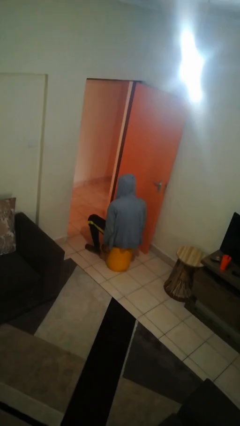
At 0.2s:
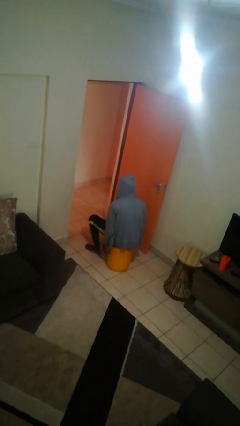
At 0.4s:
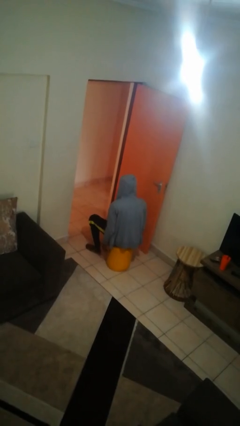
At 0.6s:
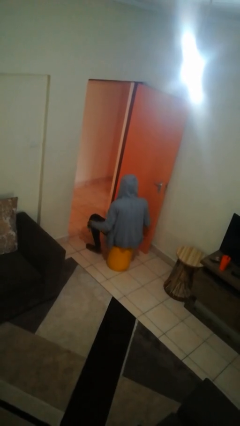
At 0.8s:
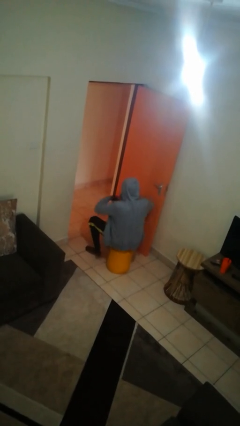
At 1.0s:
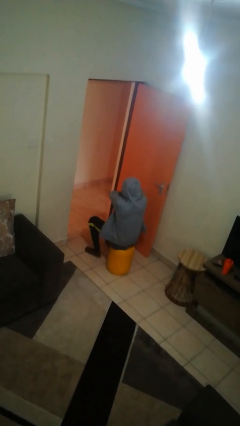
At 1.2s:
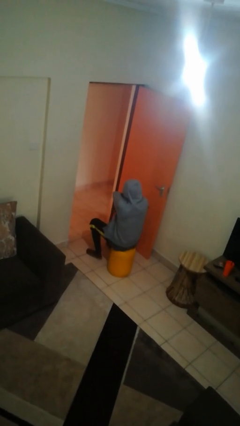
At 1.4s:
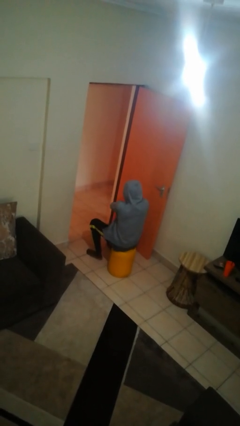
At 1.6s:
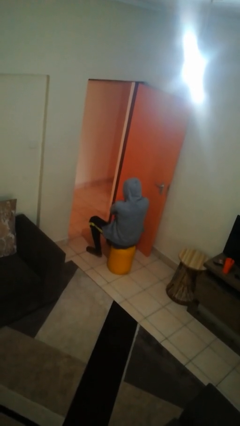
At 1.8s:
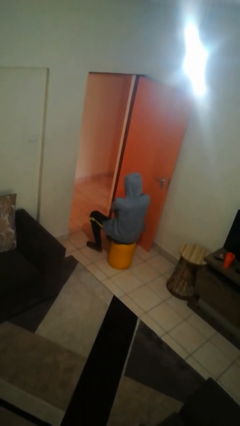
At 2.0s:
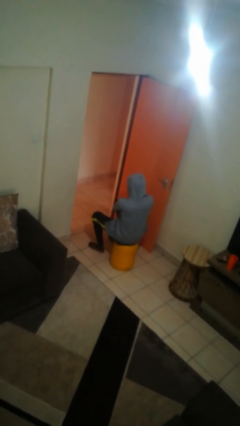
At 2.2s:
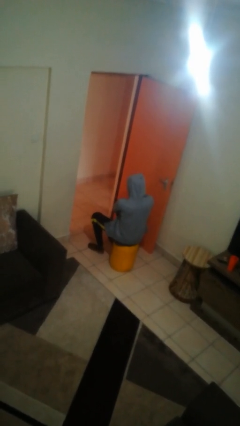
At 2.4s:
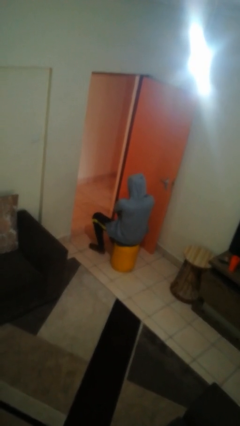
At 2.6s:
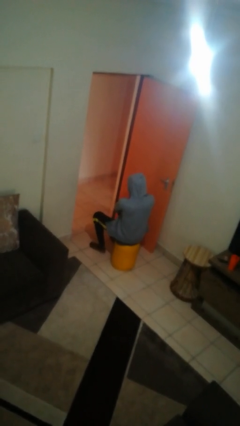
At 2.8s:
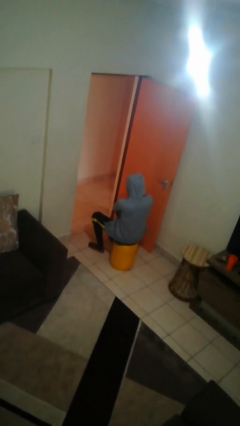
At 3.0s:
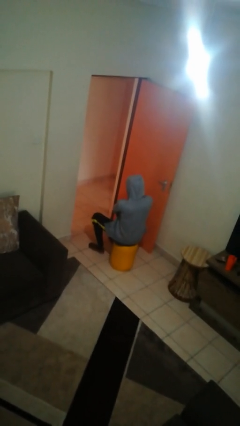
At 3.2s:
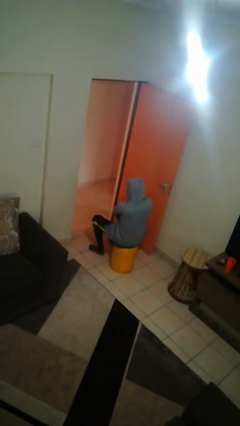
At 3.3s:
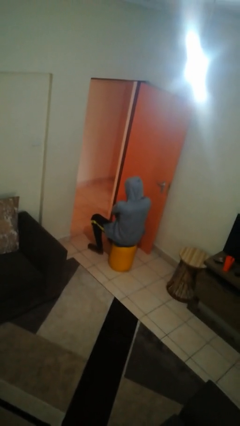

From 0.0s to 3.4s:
person crosses arms

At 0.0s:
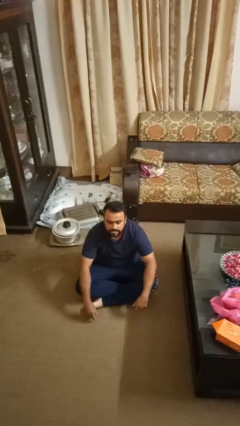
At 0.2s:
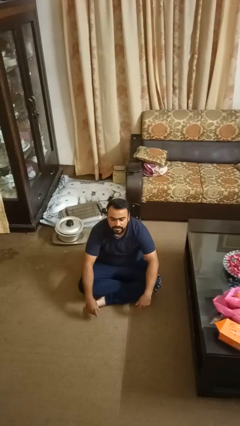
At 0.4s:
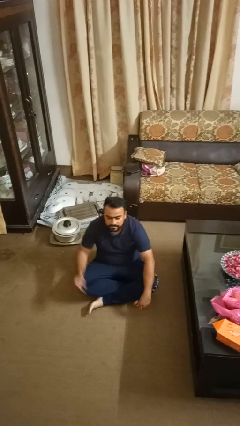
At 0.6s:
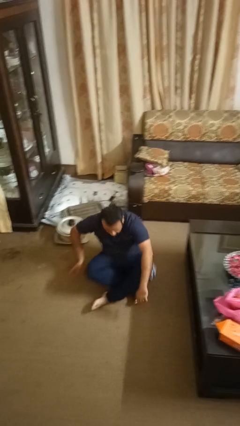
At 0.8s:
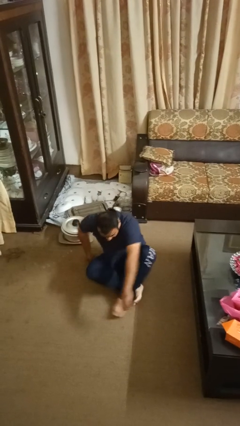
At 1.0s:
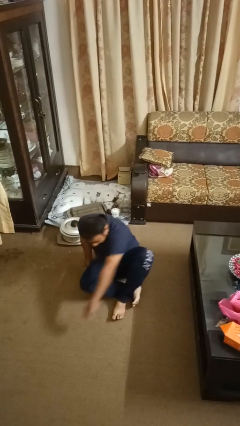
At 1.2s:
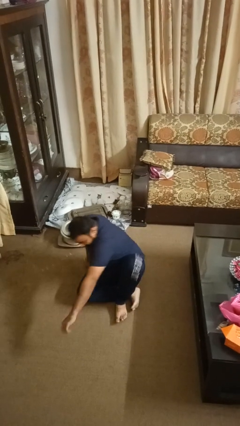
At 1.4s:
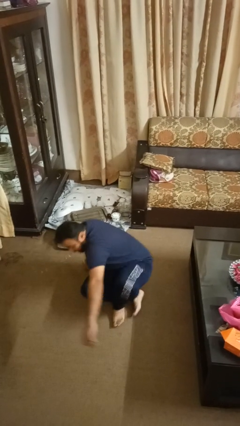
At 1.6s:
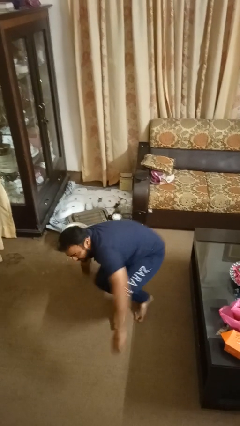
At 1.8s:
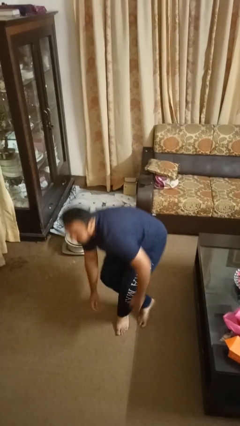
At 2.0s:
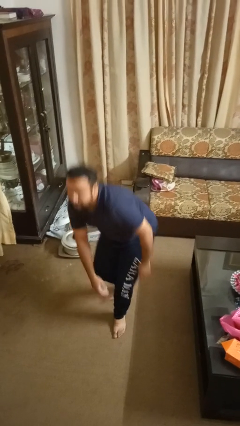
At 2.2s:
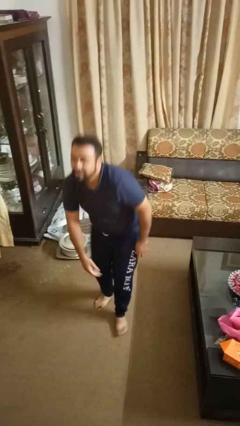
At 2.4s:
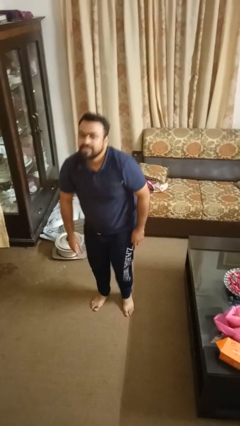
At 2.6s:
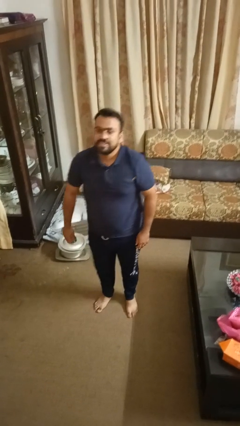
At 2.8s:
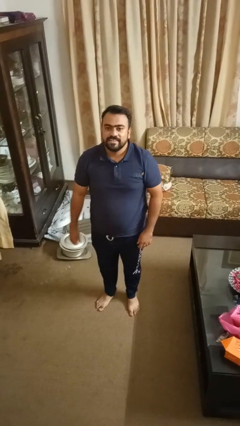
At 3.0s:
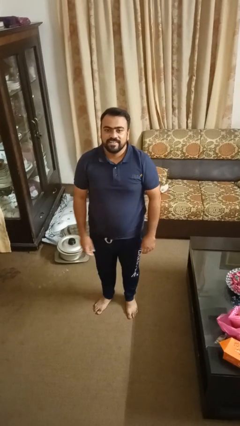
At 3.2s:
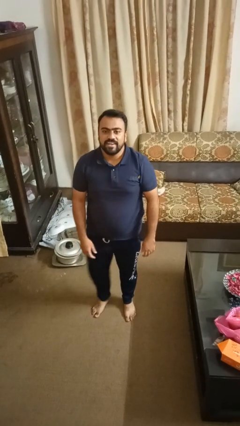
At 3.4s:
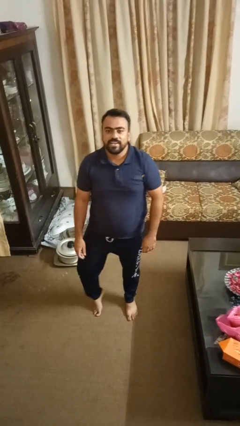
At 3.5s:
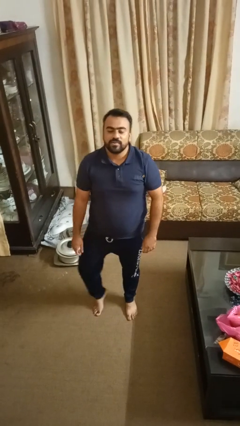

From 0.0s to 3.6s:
person stands up from floor

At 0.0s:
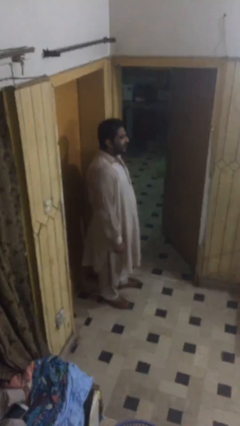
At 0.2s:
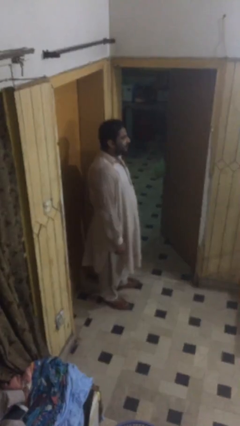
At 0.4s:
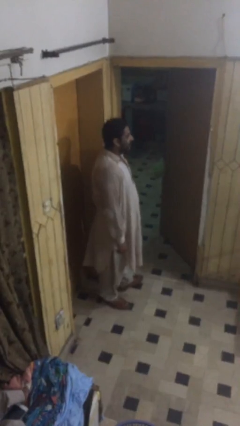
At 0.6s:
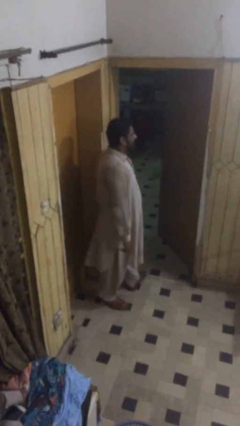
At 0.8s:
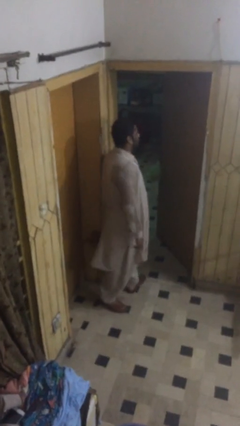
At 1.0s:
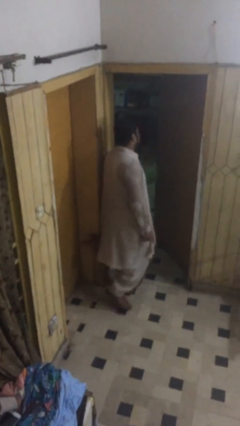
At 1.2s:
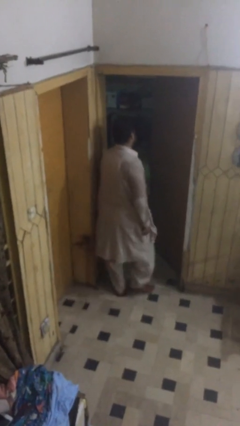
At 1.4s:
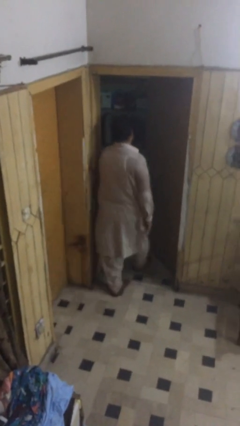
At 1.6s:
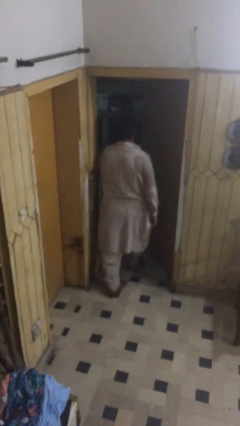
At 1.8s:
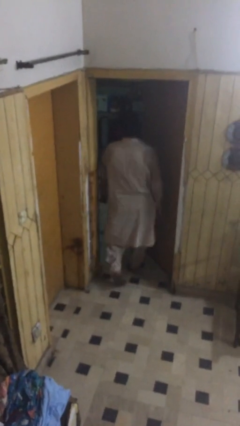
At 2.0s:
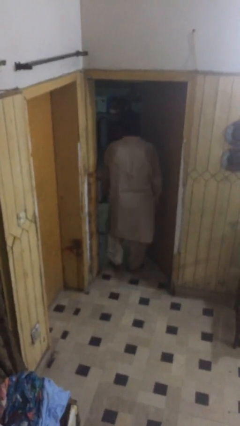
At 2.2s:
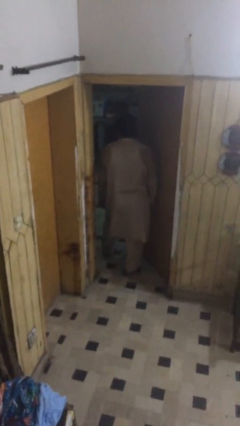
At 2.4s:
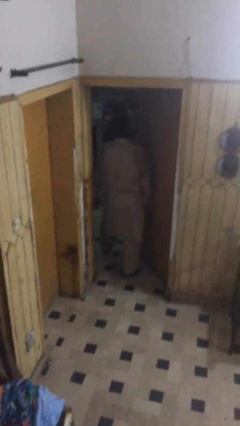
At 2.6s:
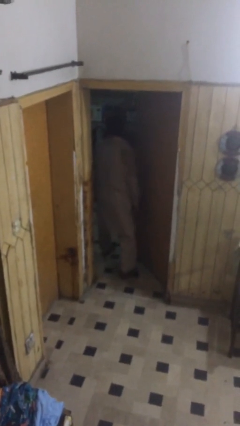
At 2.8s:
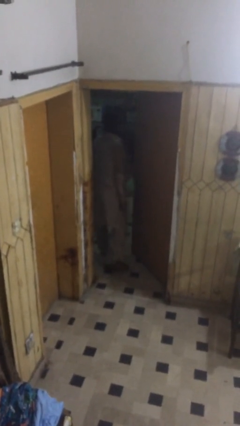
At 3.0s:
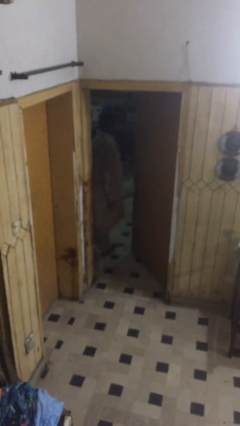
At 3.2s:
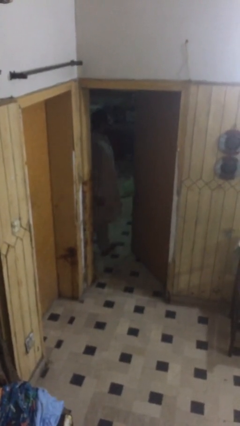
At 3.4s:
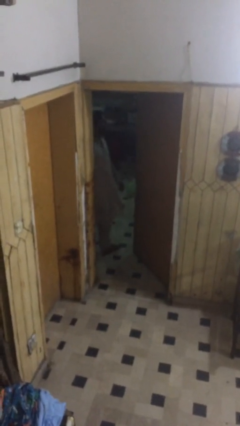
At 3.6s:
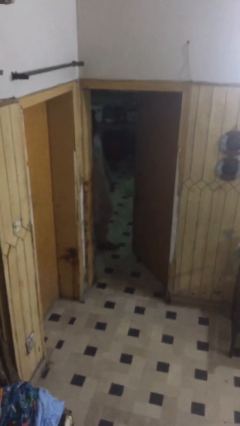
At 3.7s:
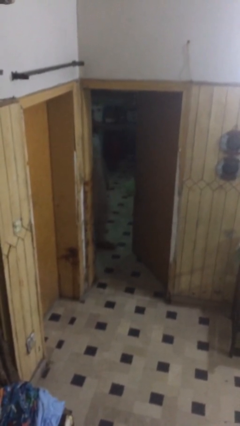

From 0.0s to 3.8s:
person exits scene through structure

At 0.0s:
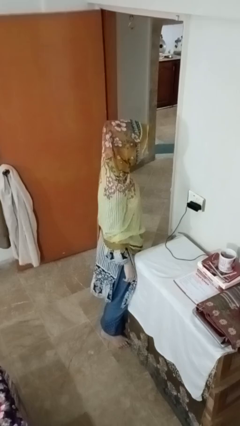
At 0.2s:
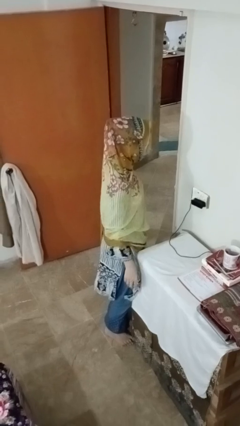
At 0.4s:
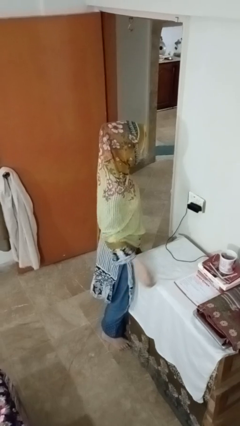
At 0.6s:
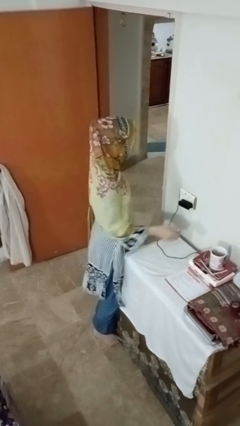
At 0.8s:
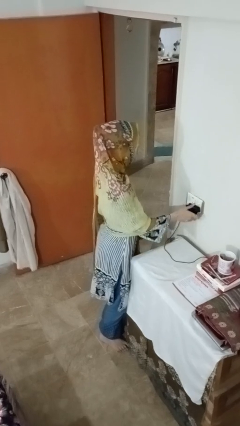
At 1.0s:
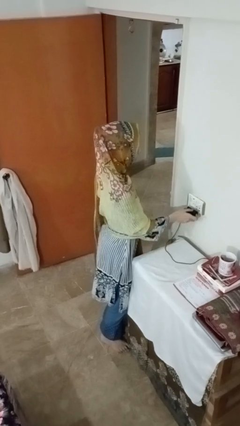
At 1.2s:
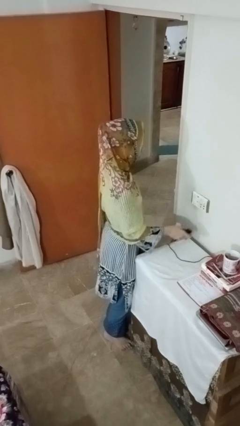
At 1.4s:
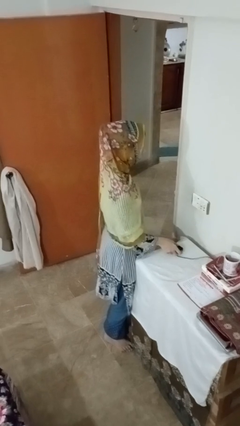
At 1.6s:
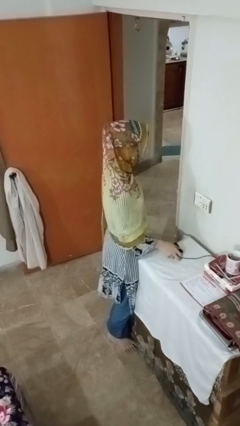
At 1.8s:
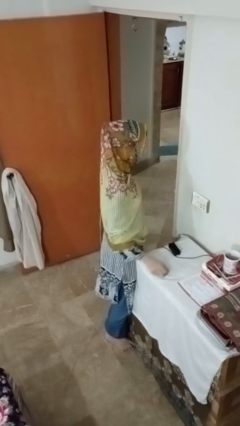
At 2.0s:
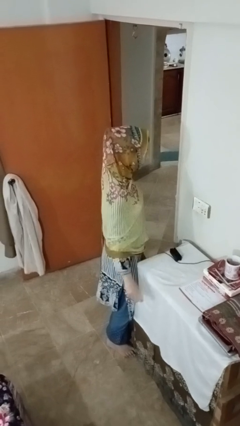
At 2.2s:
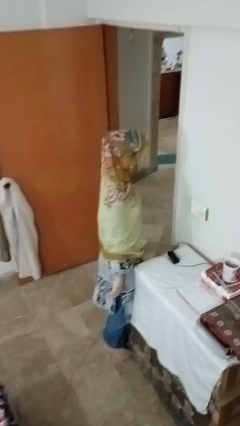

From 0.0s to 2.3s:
person unplugs from electrical socket

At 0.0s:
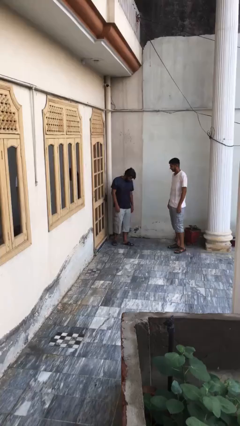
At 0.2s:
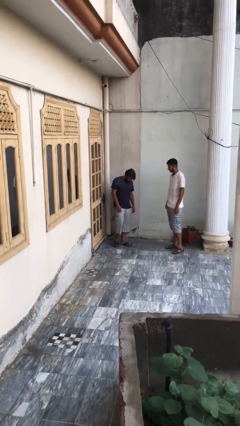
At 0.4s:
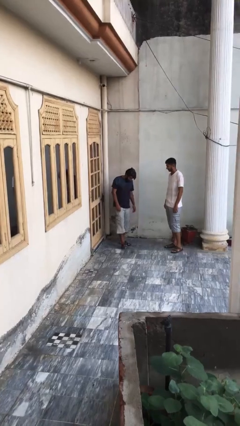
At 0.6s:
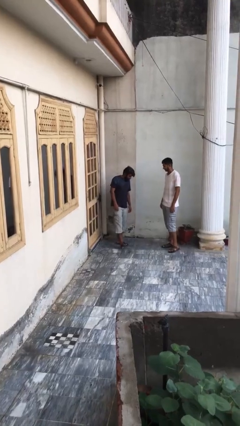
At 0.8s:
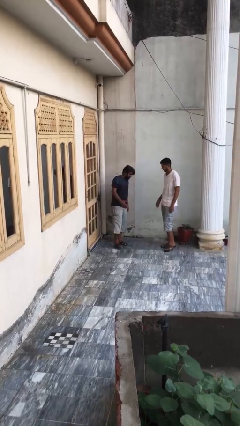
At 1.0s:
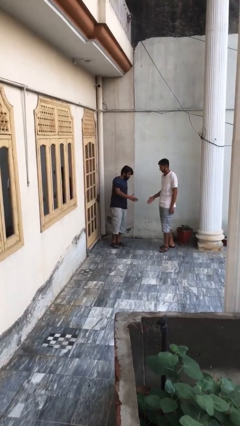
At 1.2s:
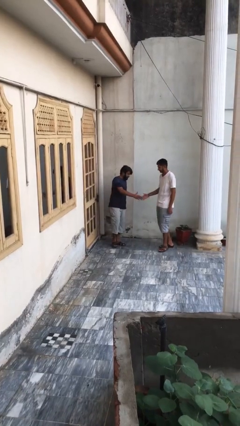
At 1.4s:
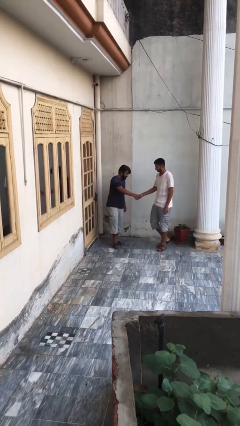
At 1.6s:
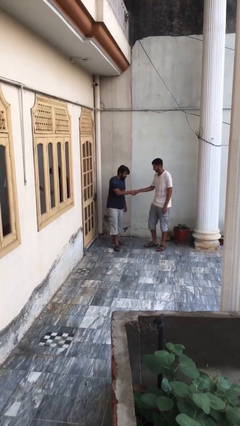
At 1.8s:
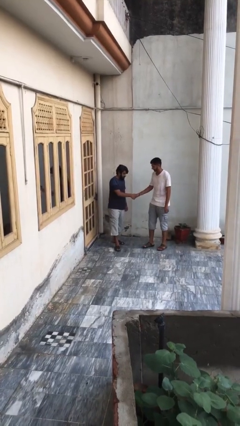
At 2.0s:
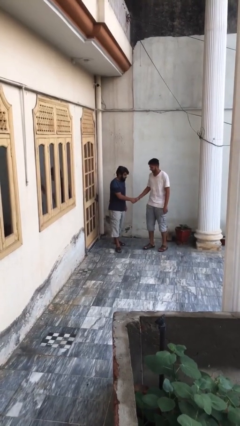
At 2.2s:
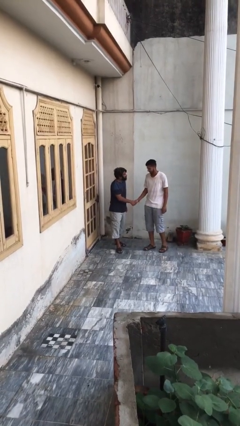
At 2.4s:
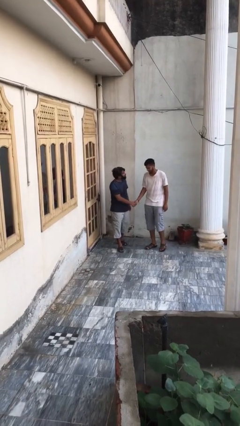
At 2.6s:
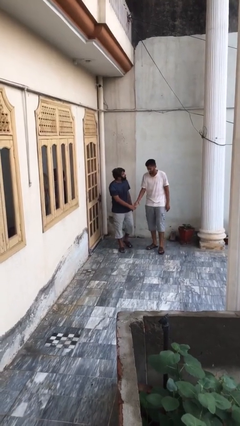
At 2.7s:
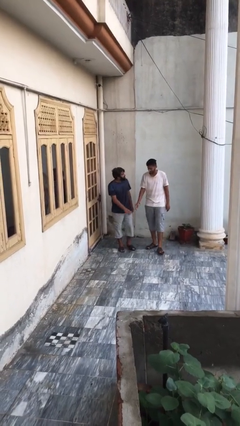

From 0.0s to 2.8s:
person shakes hand

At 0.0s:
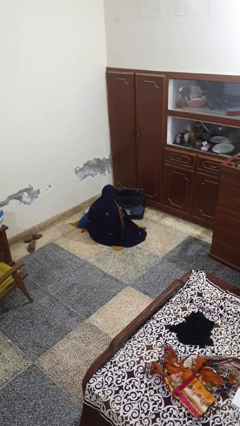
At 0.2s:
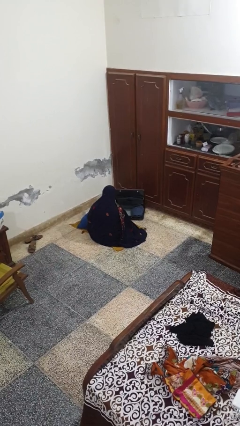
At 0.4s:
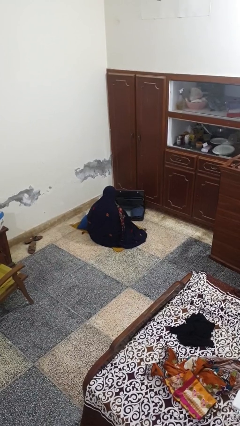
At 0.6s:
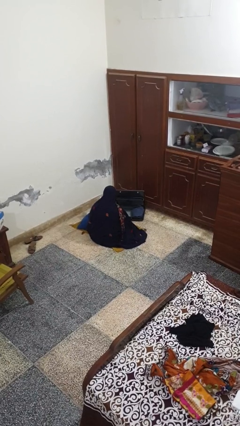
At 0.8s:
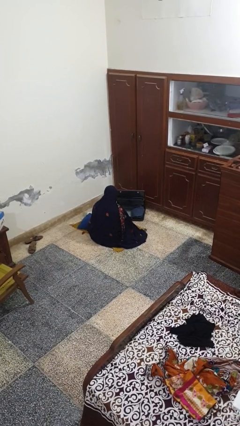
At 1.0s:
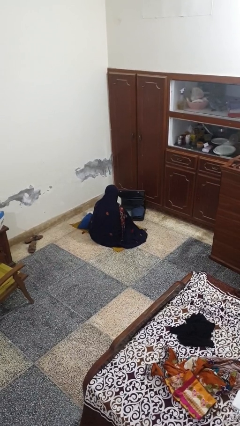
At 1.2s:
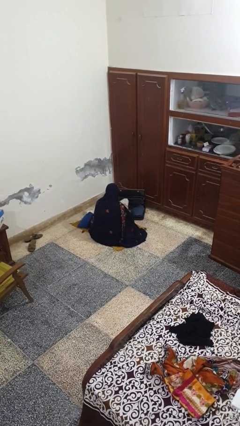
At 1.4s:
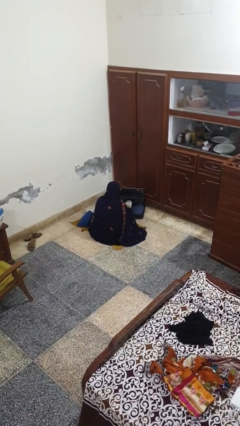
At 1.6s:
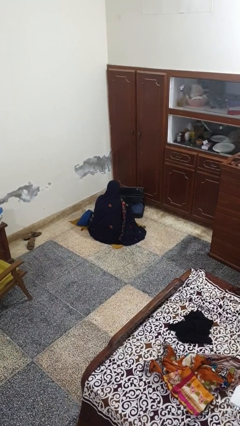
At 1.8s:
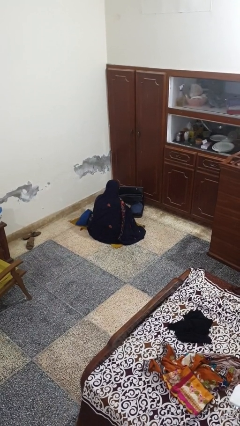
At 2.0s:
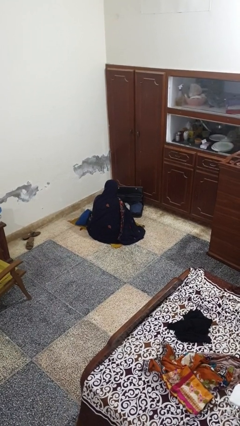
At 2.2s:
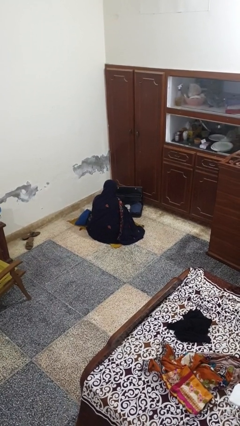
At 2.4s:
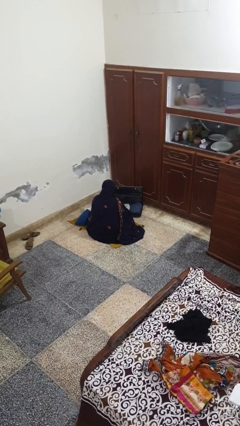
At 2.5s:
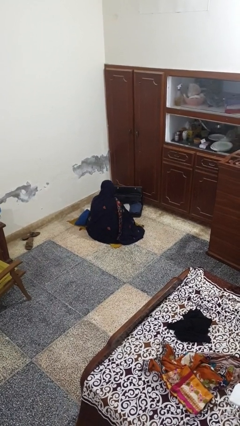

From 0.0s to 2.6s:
person loads clothes into suitcase
